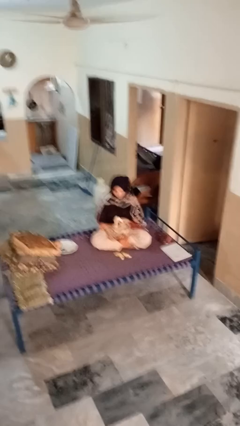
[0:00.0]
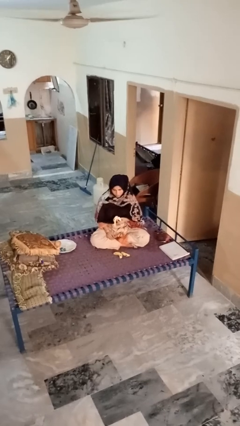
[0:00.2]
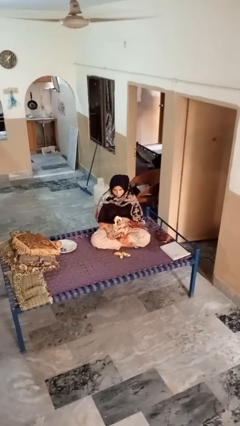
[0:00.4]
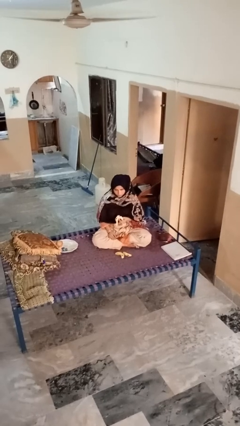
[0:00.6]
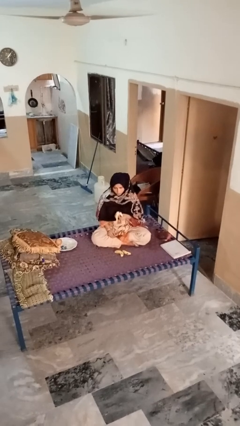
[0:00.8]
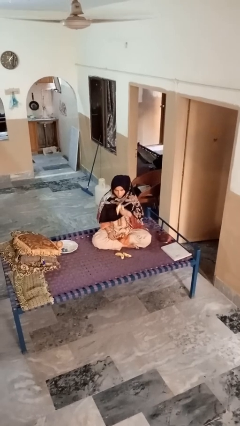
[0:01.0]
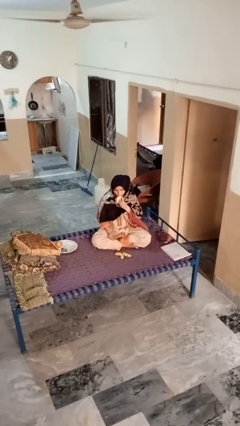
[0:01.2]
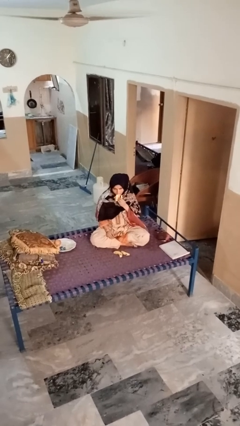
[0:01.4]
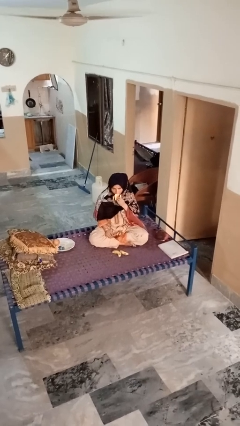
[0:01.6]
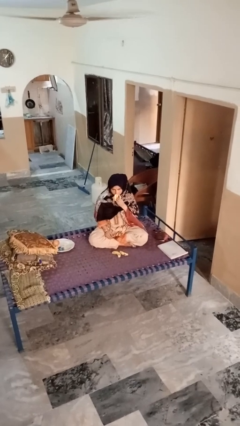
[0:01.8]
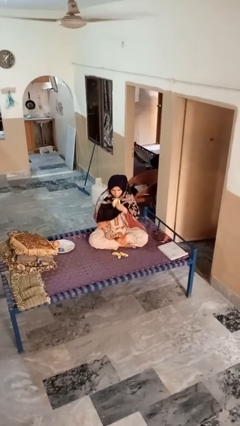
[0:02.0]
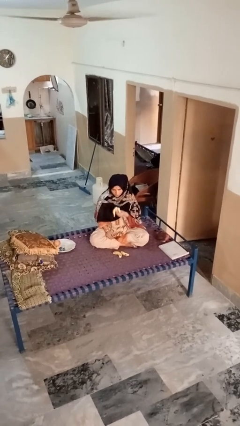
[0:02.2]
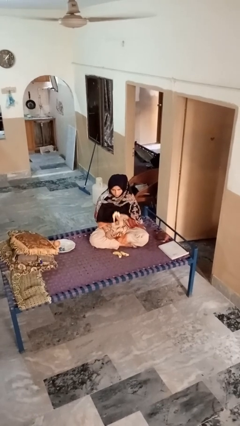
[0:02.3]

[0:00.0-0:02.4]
person eats banana

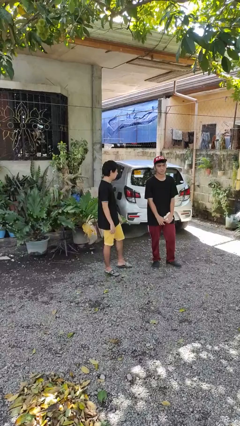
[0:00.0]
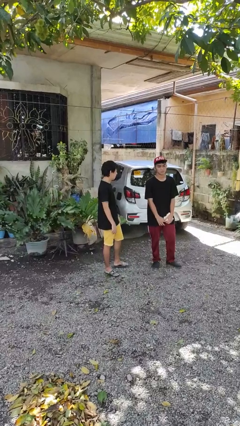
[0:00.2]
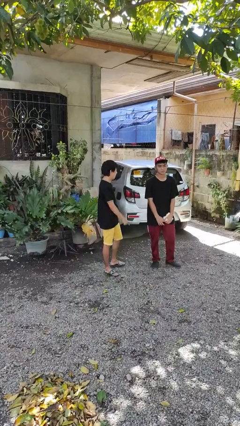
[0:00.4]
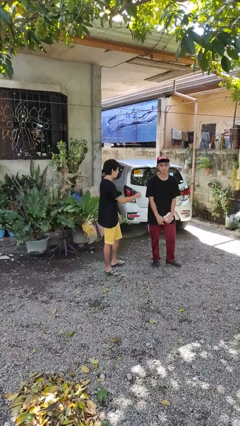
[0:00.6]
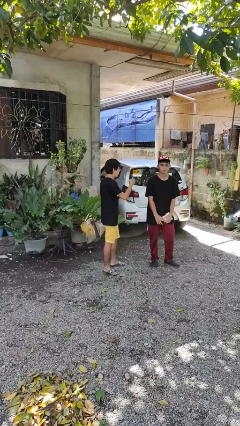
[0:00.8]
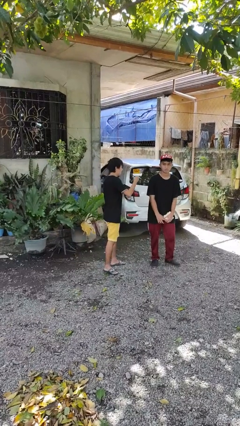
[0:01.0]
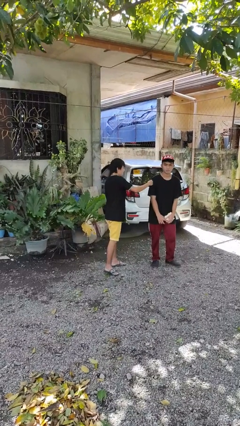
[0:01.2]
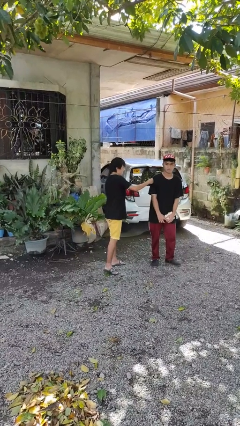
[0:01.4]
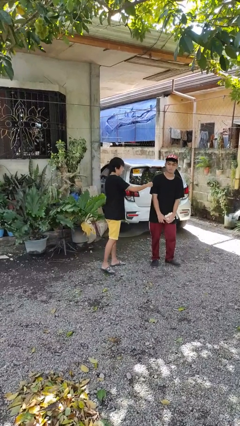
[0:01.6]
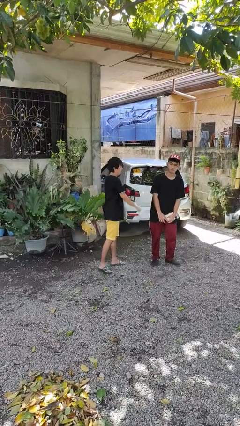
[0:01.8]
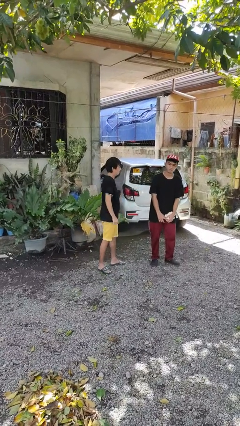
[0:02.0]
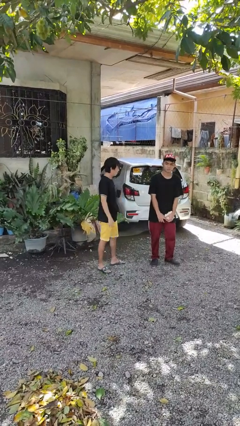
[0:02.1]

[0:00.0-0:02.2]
person pounds shoulders of person

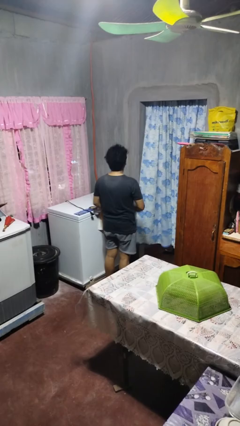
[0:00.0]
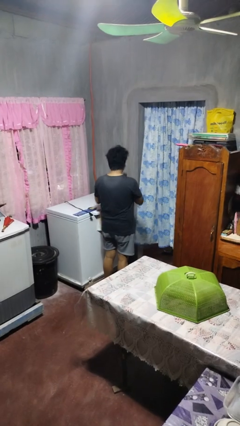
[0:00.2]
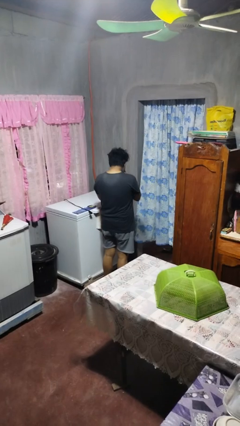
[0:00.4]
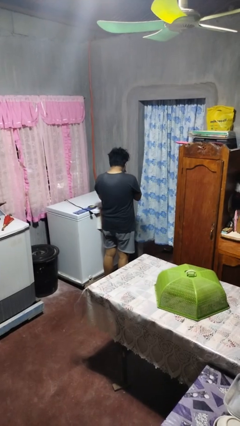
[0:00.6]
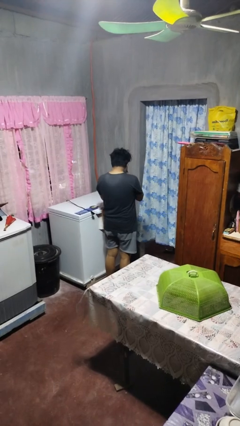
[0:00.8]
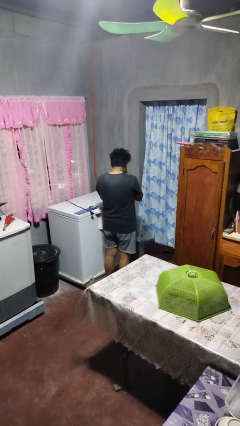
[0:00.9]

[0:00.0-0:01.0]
person sneezes into hand

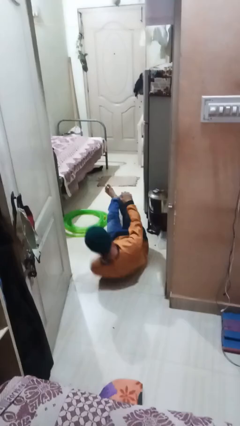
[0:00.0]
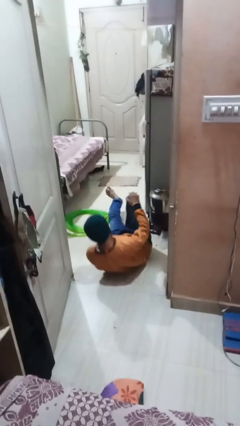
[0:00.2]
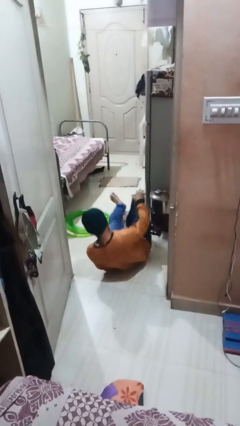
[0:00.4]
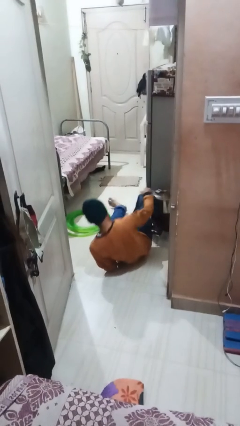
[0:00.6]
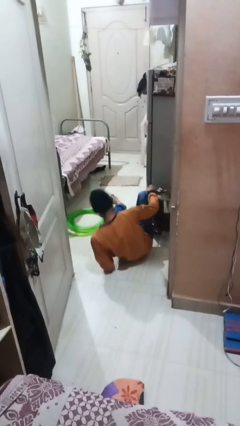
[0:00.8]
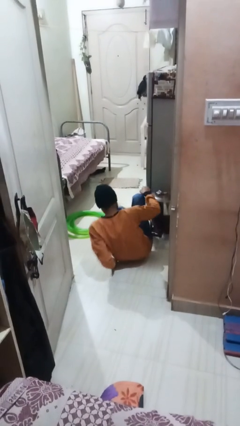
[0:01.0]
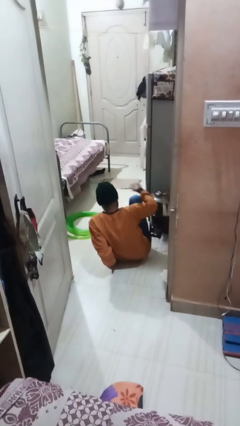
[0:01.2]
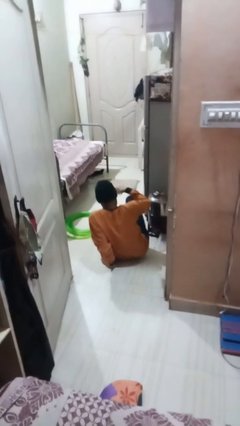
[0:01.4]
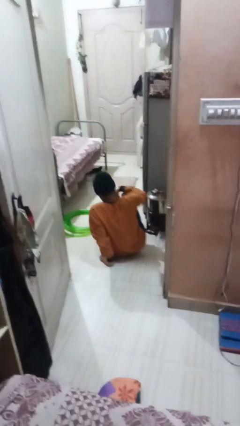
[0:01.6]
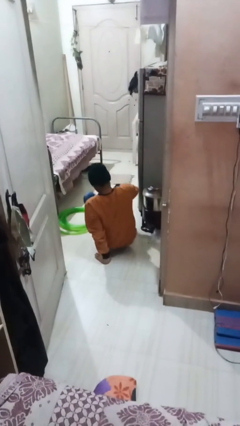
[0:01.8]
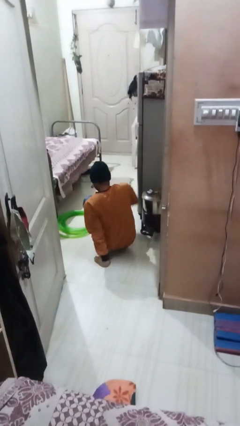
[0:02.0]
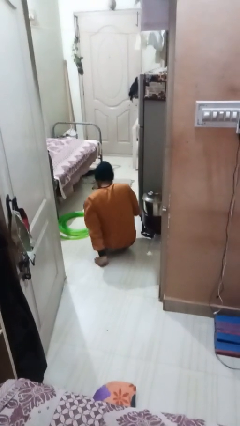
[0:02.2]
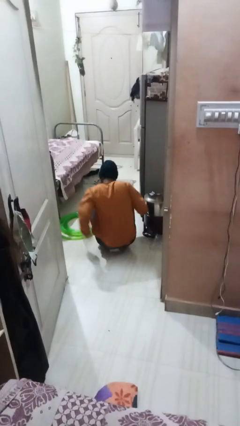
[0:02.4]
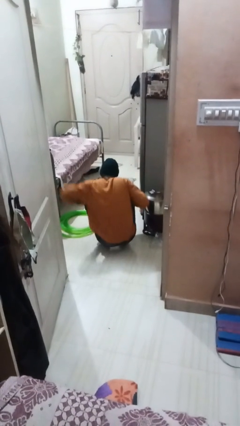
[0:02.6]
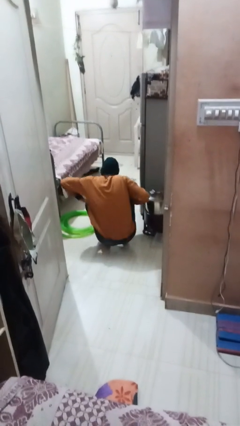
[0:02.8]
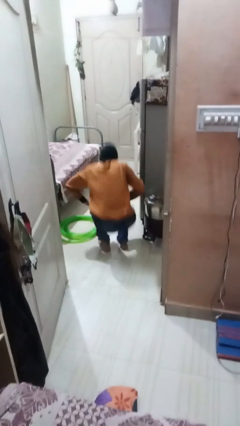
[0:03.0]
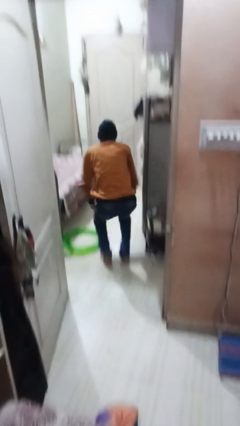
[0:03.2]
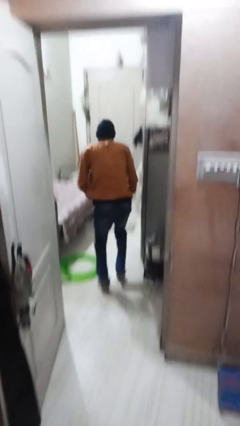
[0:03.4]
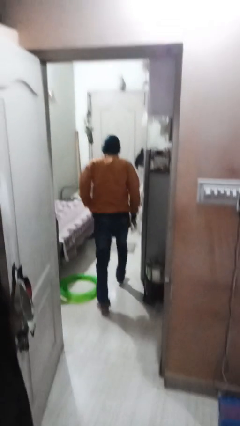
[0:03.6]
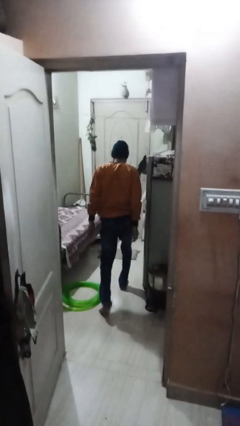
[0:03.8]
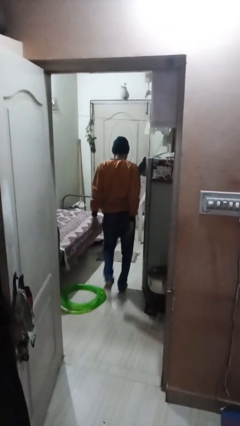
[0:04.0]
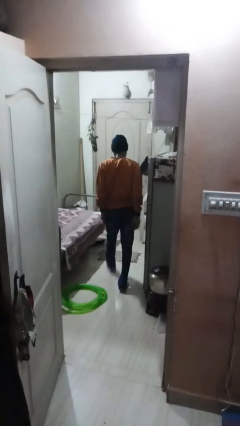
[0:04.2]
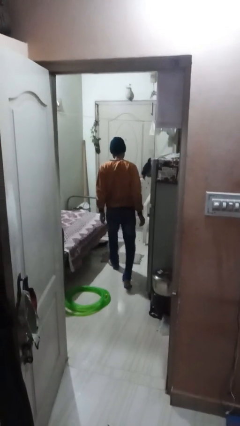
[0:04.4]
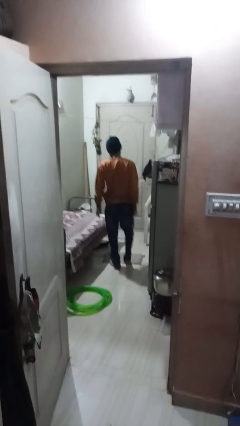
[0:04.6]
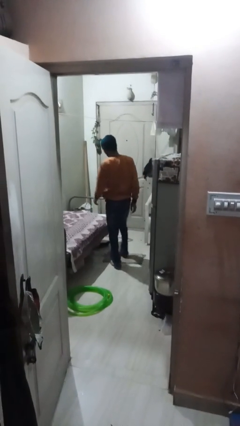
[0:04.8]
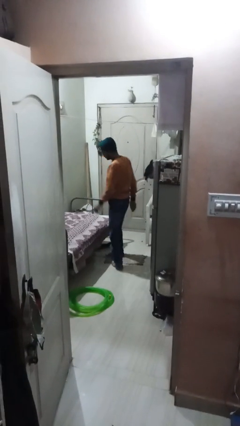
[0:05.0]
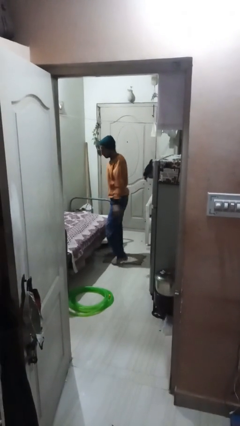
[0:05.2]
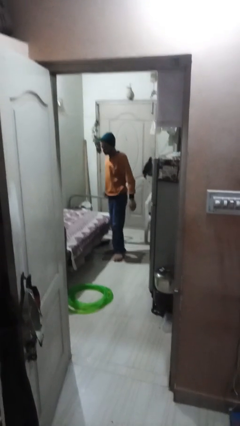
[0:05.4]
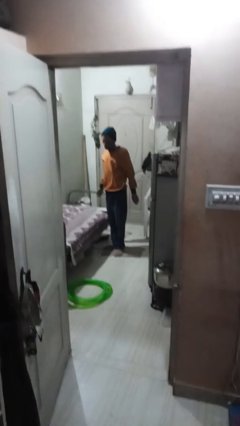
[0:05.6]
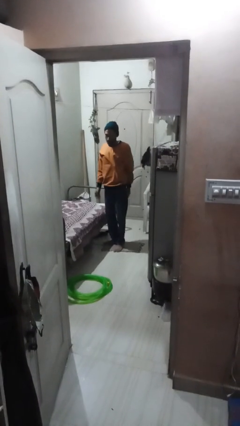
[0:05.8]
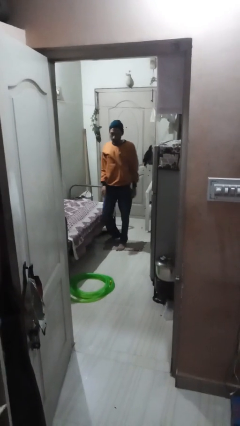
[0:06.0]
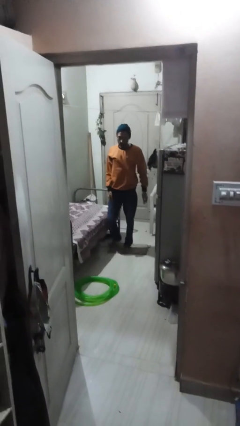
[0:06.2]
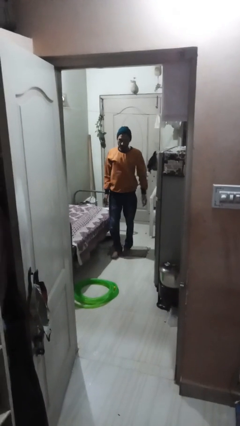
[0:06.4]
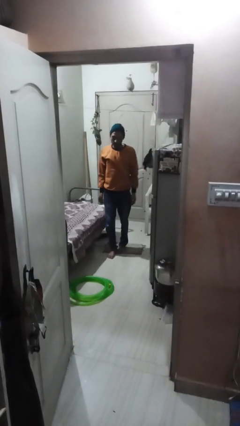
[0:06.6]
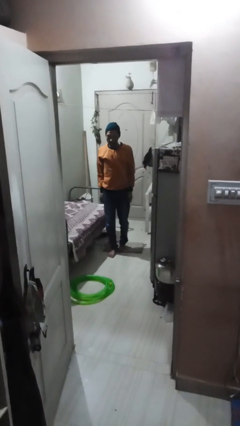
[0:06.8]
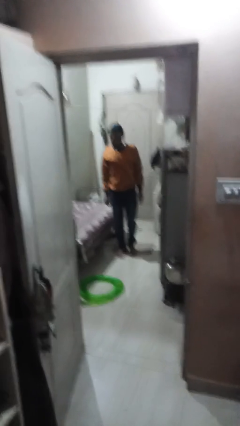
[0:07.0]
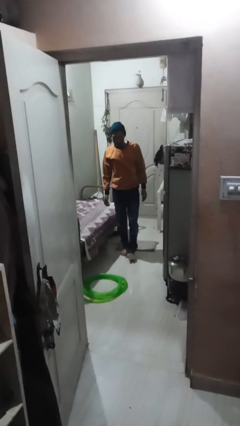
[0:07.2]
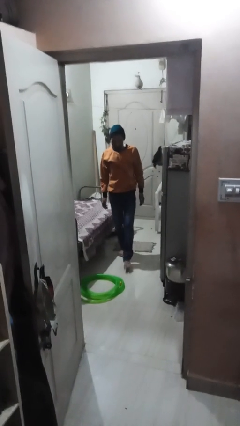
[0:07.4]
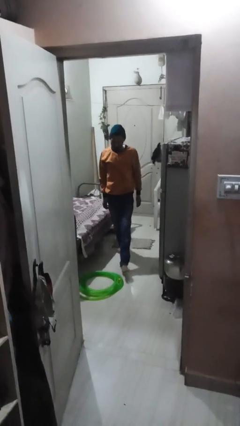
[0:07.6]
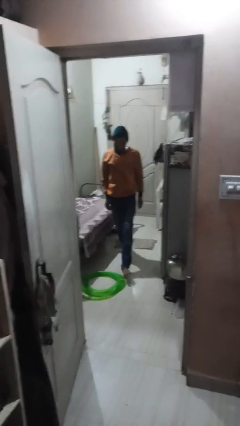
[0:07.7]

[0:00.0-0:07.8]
person stands up from floor

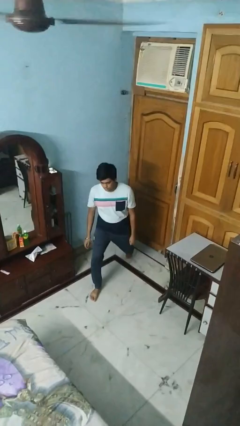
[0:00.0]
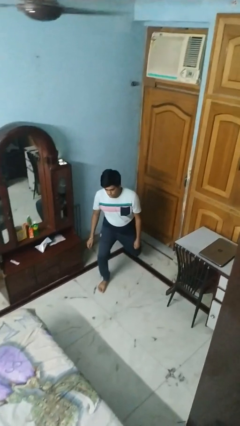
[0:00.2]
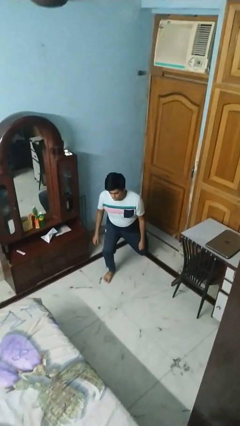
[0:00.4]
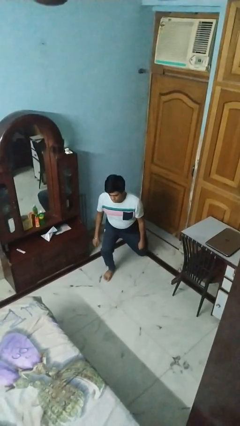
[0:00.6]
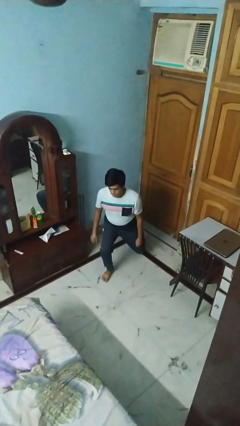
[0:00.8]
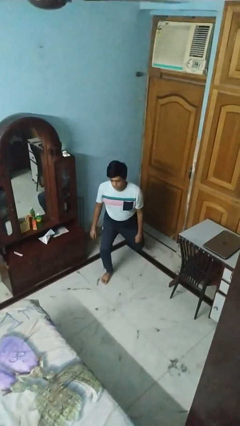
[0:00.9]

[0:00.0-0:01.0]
person exercises with lunges

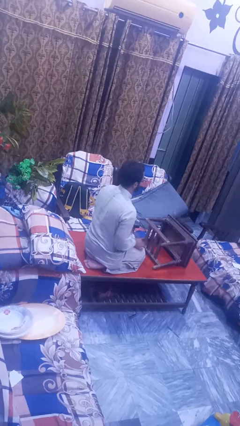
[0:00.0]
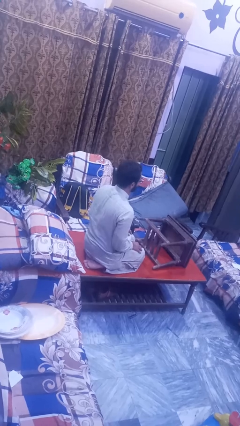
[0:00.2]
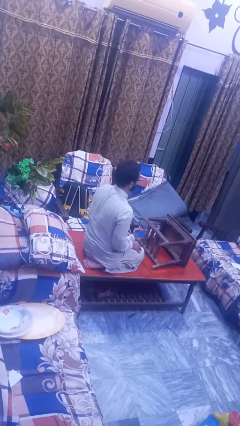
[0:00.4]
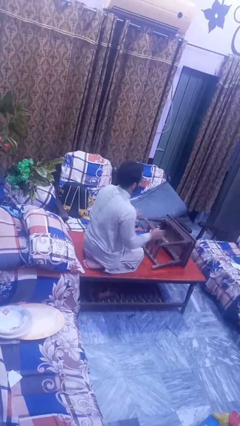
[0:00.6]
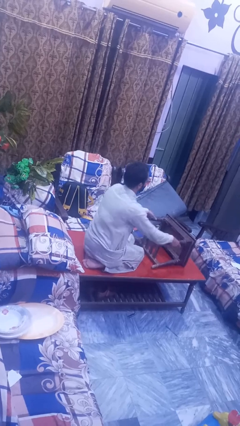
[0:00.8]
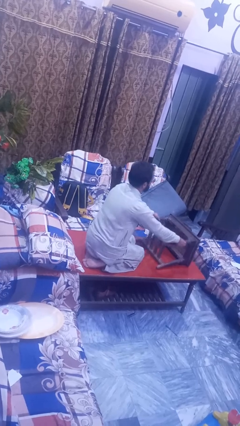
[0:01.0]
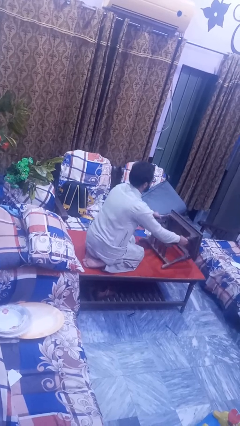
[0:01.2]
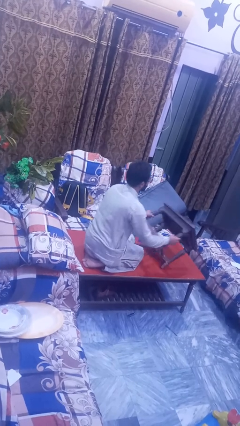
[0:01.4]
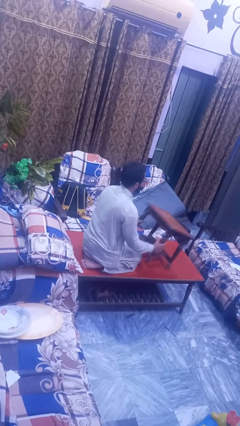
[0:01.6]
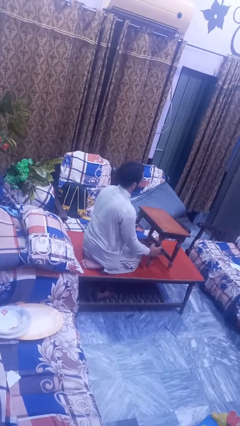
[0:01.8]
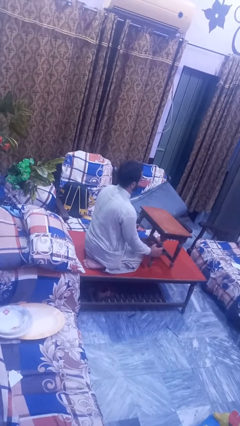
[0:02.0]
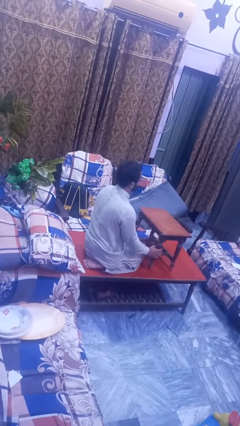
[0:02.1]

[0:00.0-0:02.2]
person sets upright furniture

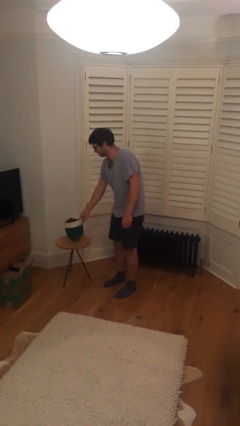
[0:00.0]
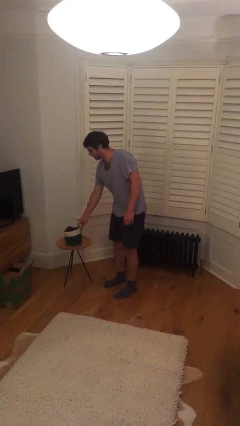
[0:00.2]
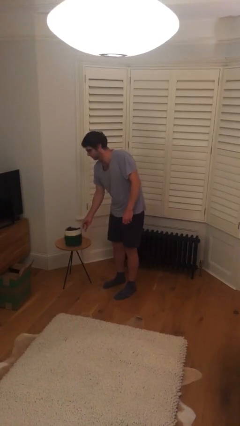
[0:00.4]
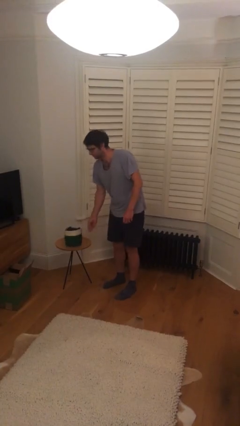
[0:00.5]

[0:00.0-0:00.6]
person puts down object on table
